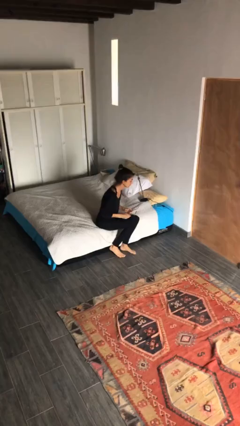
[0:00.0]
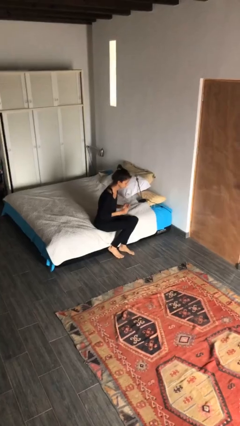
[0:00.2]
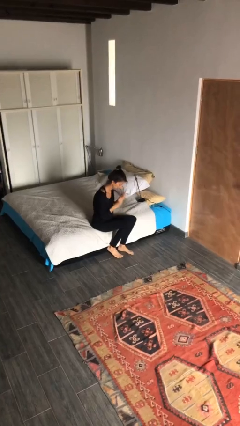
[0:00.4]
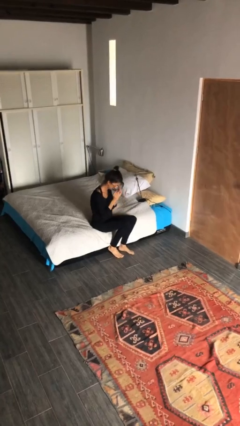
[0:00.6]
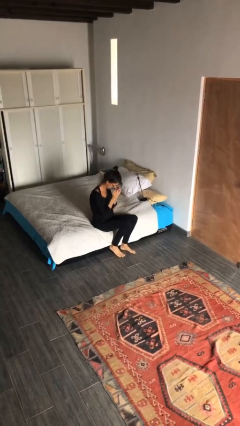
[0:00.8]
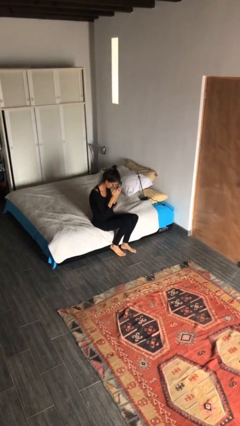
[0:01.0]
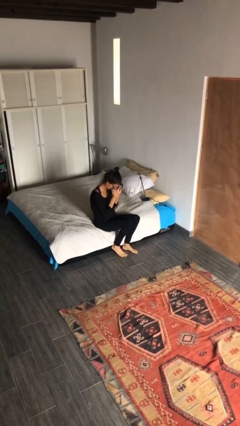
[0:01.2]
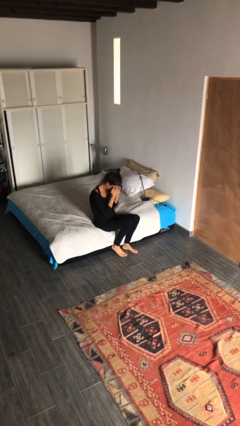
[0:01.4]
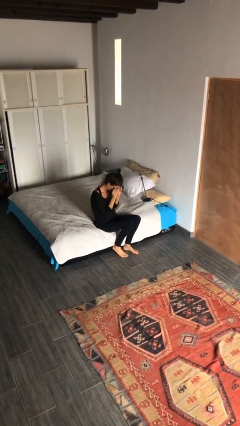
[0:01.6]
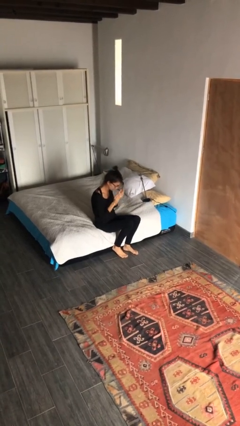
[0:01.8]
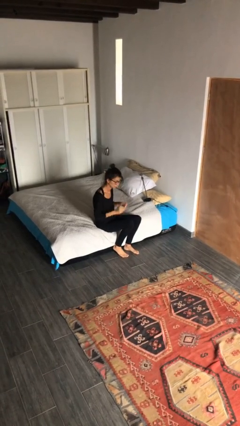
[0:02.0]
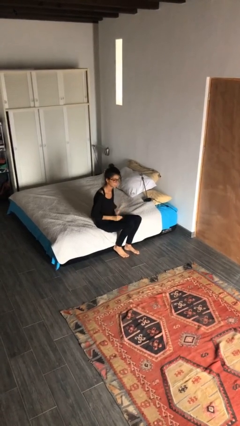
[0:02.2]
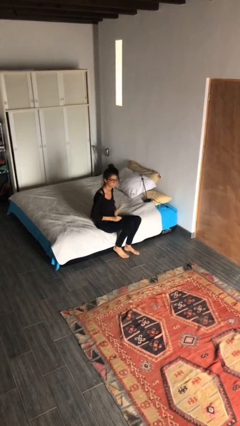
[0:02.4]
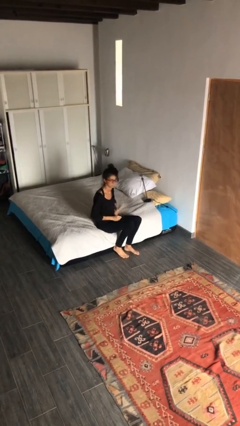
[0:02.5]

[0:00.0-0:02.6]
person puts on glasses

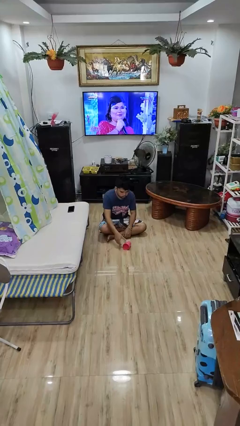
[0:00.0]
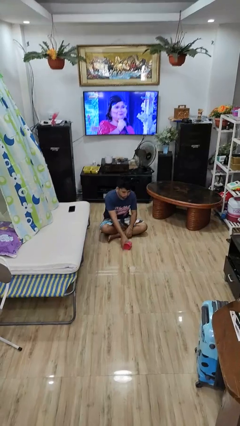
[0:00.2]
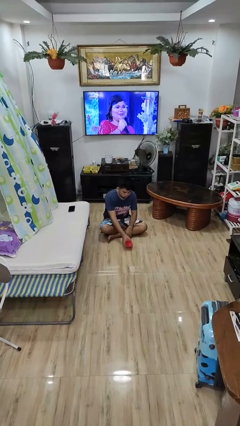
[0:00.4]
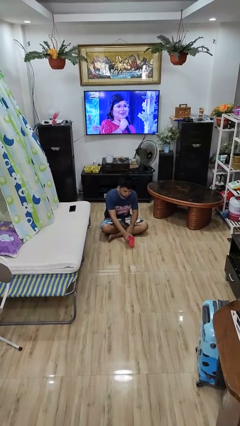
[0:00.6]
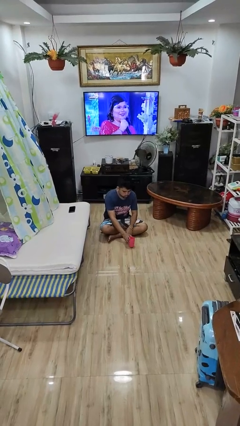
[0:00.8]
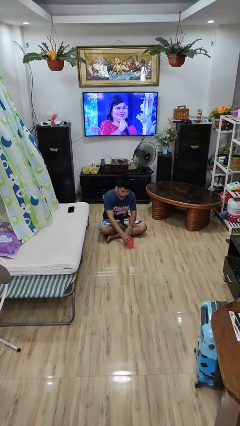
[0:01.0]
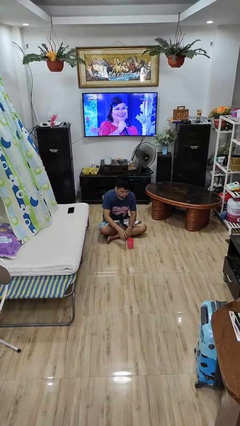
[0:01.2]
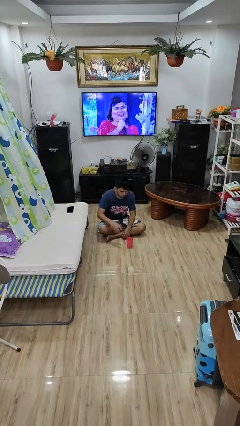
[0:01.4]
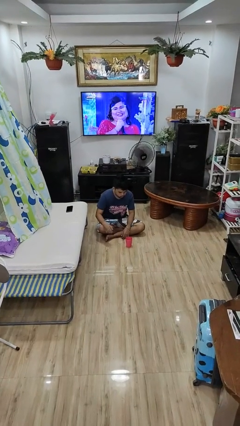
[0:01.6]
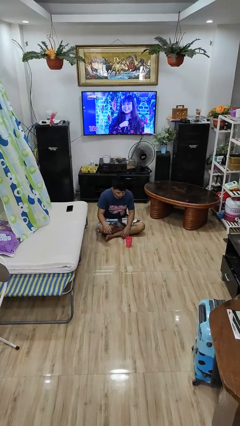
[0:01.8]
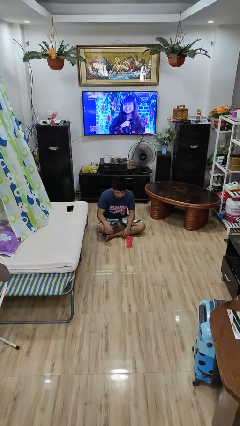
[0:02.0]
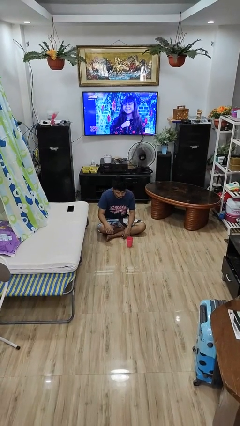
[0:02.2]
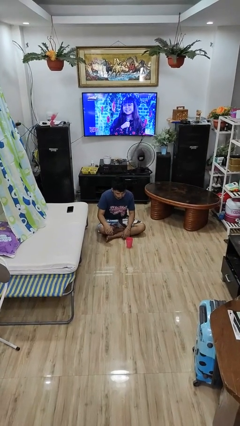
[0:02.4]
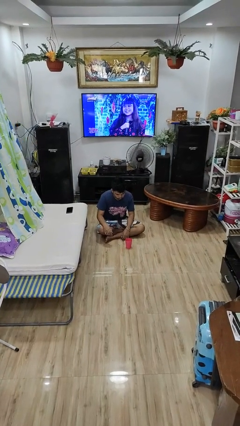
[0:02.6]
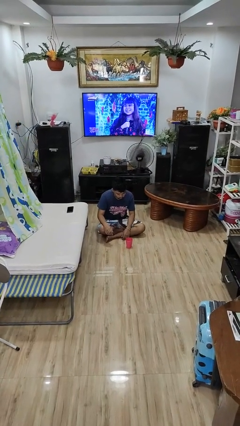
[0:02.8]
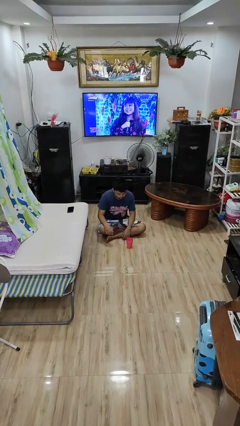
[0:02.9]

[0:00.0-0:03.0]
person sets upright glass

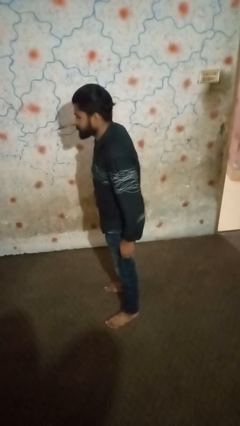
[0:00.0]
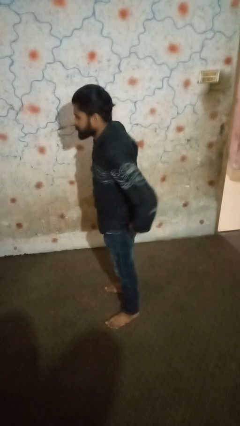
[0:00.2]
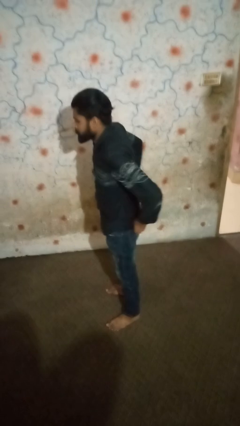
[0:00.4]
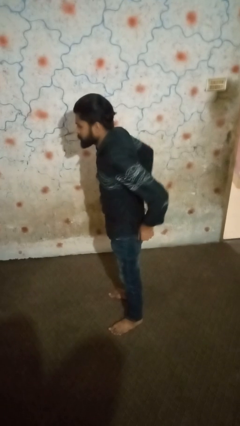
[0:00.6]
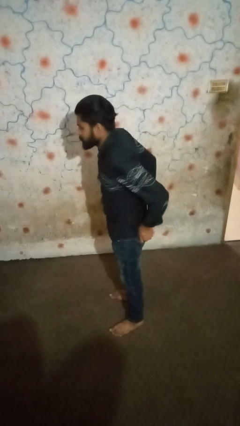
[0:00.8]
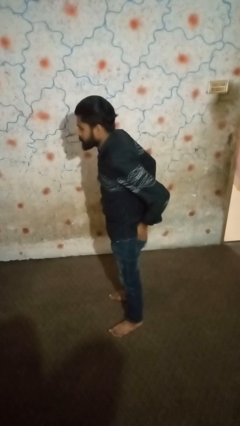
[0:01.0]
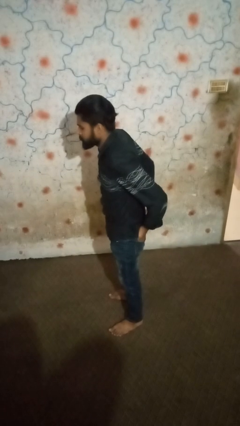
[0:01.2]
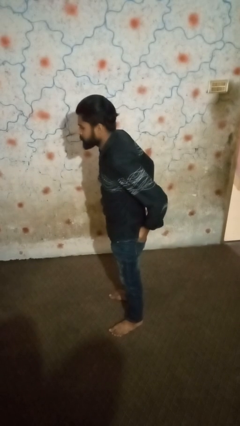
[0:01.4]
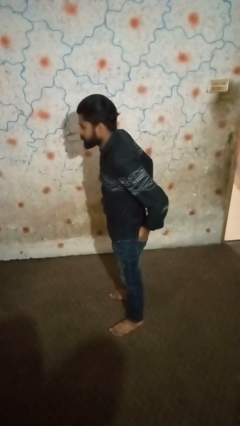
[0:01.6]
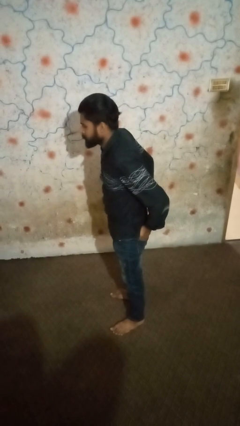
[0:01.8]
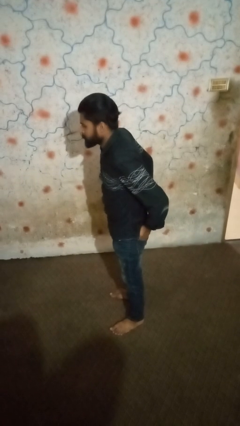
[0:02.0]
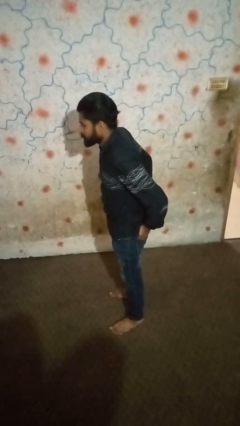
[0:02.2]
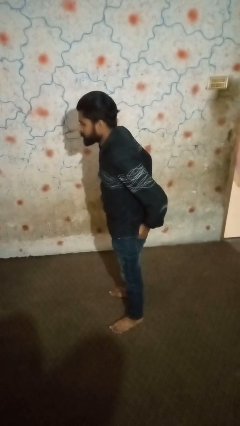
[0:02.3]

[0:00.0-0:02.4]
person puts hands in back pockets

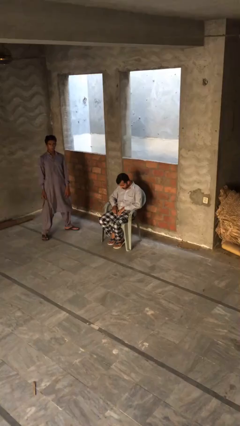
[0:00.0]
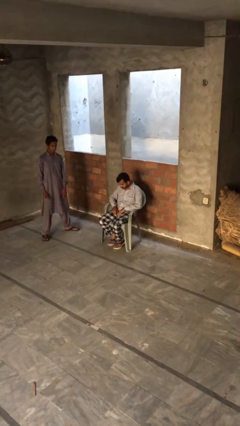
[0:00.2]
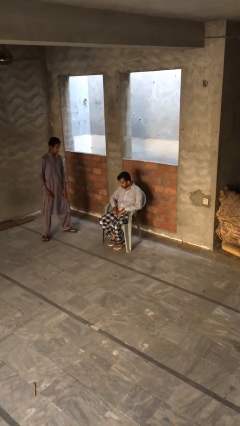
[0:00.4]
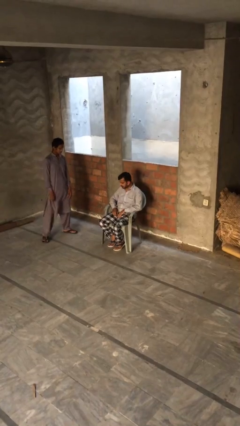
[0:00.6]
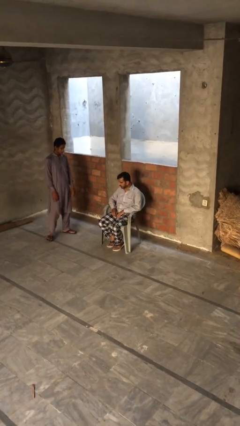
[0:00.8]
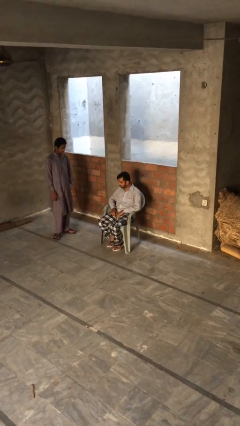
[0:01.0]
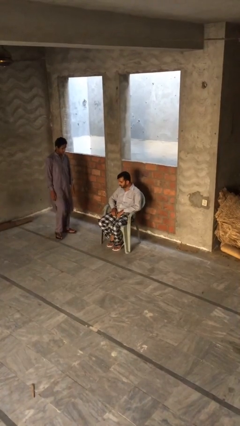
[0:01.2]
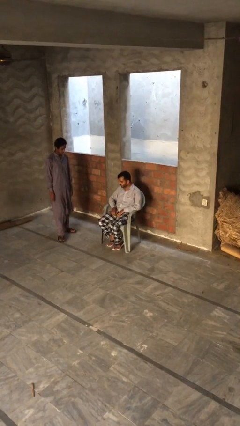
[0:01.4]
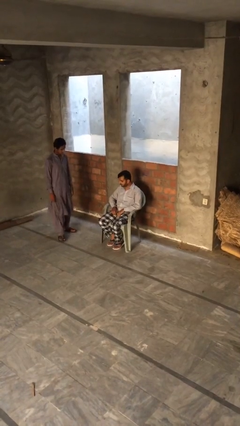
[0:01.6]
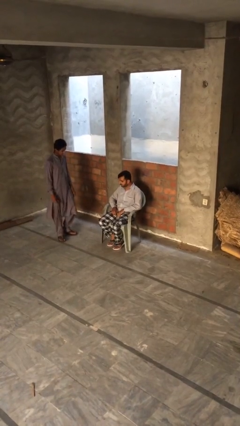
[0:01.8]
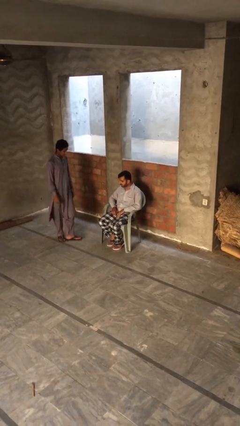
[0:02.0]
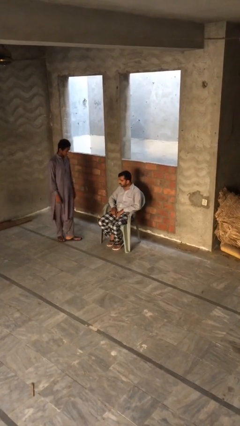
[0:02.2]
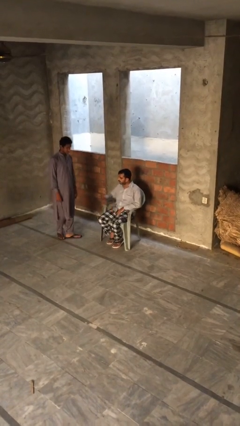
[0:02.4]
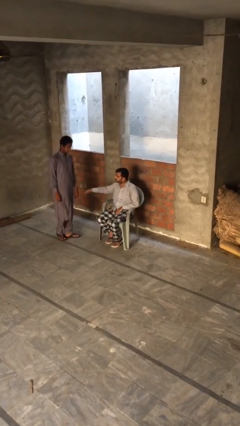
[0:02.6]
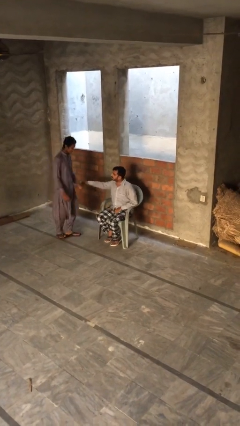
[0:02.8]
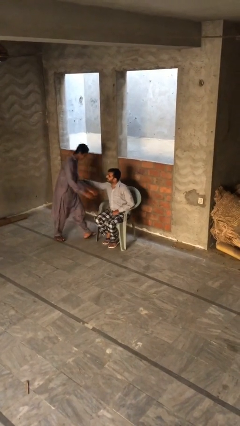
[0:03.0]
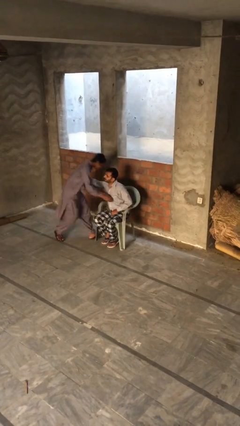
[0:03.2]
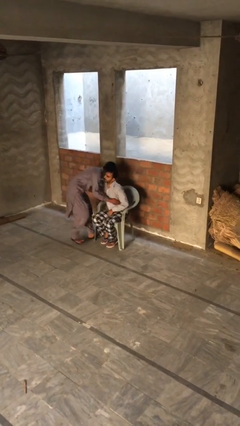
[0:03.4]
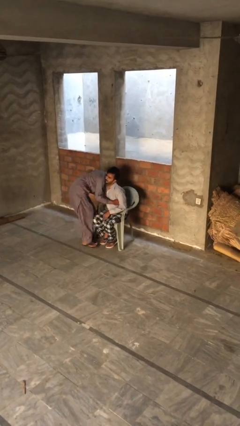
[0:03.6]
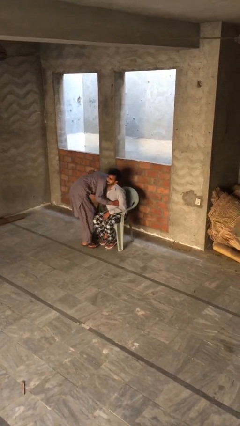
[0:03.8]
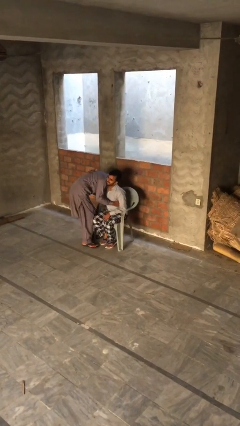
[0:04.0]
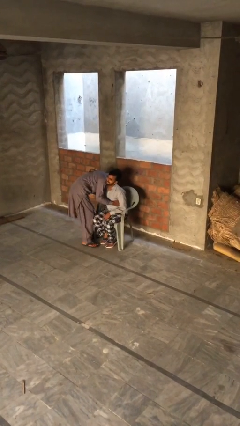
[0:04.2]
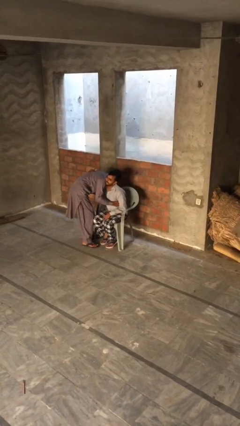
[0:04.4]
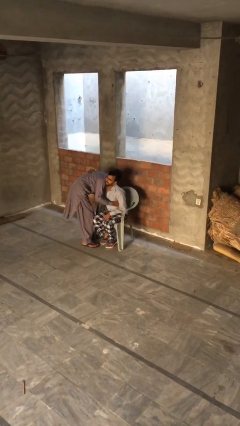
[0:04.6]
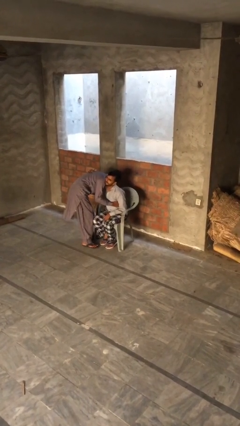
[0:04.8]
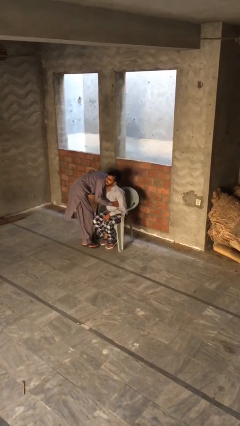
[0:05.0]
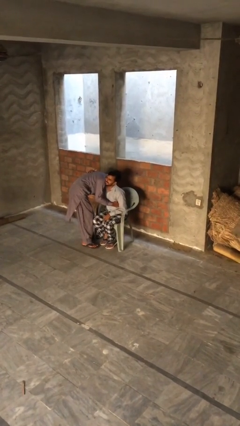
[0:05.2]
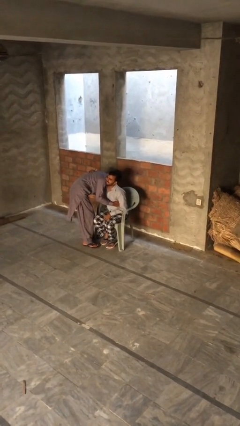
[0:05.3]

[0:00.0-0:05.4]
person embraces person

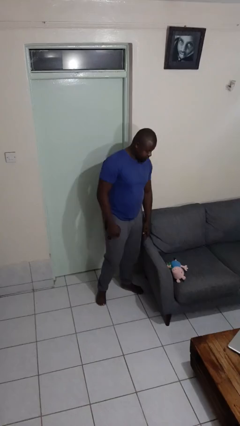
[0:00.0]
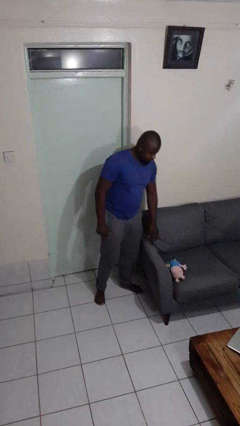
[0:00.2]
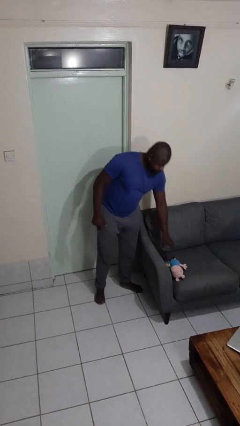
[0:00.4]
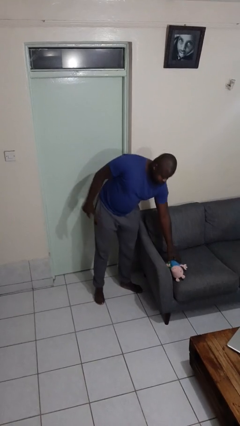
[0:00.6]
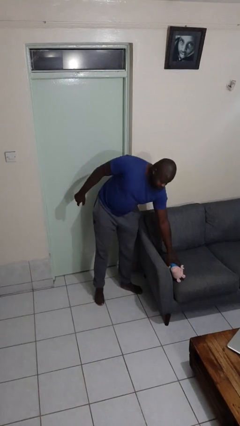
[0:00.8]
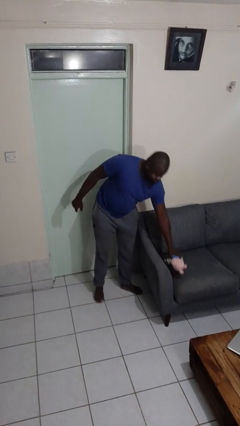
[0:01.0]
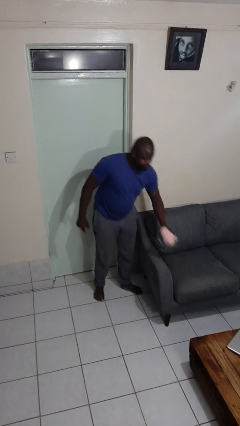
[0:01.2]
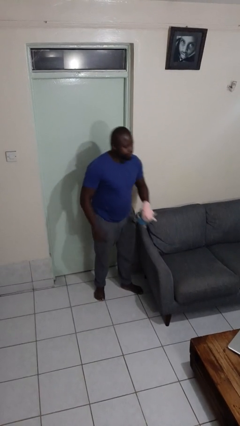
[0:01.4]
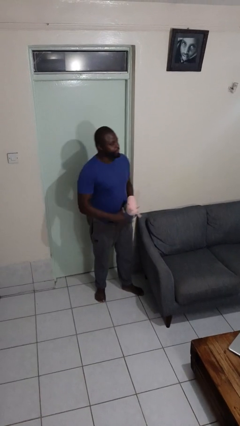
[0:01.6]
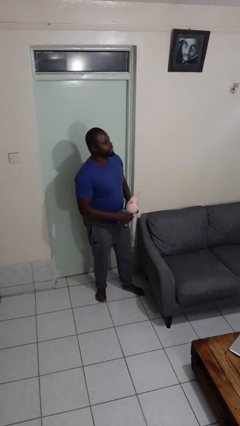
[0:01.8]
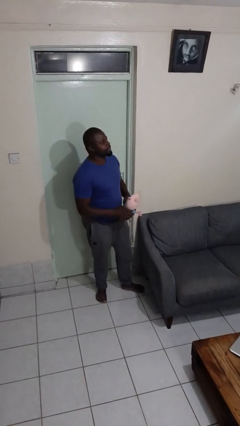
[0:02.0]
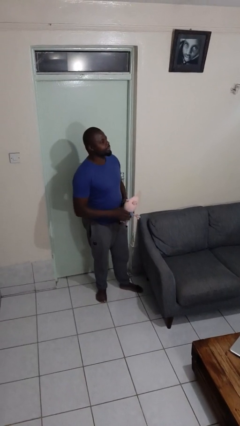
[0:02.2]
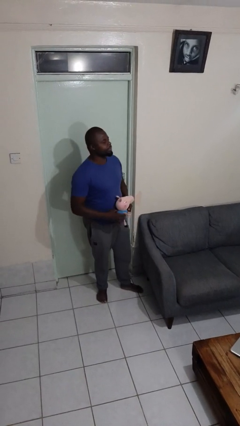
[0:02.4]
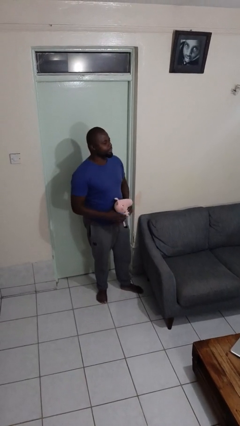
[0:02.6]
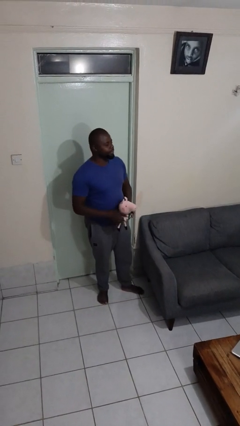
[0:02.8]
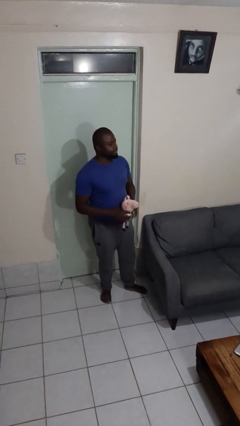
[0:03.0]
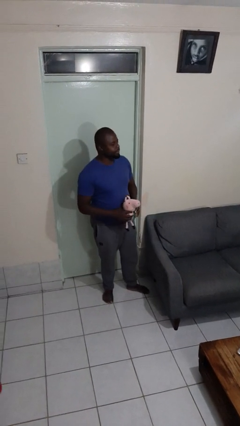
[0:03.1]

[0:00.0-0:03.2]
person picks up object from couch

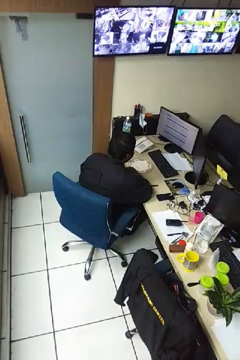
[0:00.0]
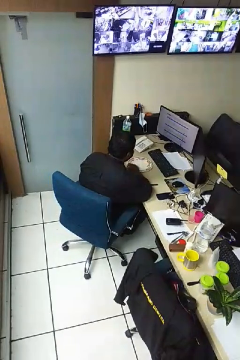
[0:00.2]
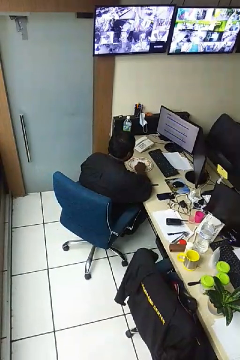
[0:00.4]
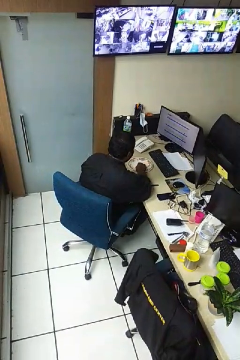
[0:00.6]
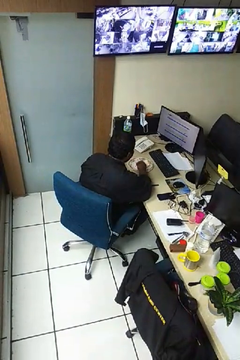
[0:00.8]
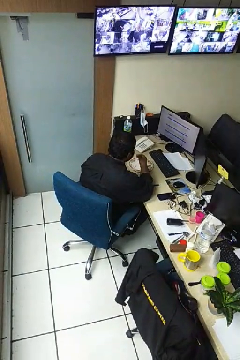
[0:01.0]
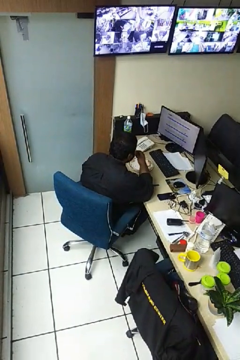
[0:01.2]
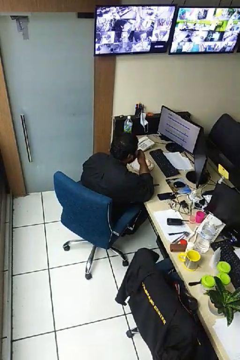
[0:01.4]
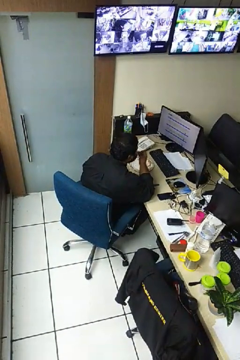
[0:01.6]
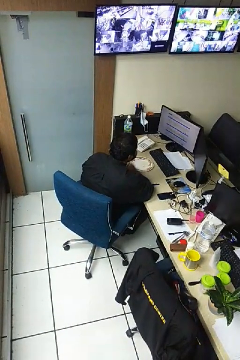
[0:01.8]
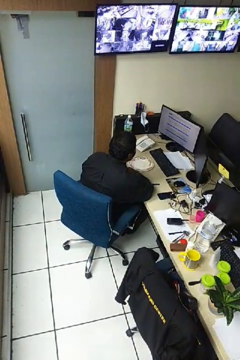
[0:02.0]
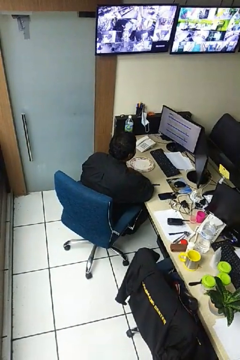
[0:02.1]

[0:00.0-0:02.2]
person eats with hands
